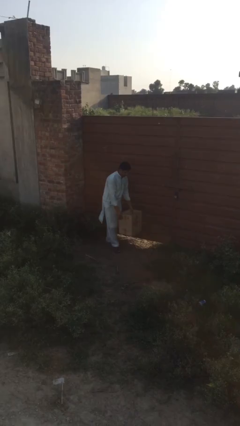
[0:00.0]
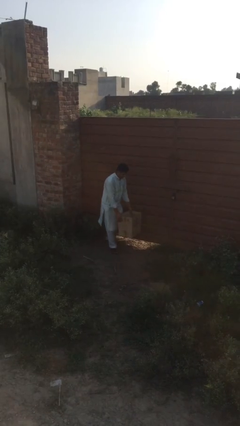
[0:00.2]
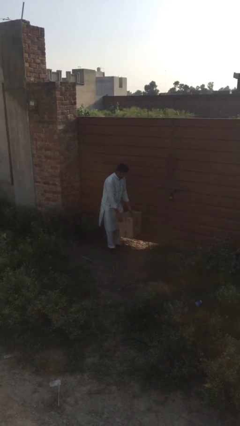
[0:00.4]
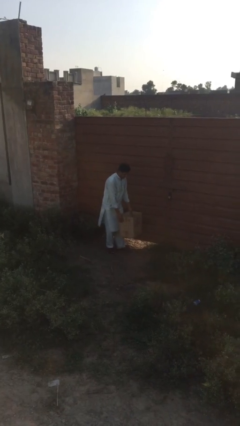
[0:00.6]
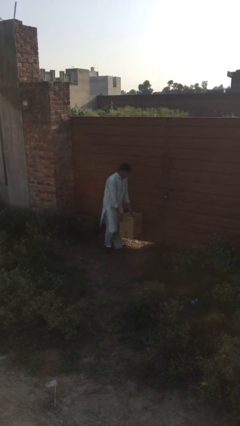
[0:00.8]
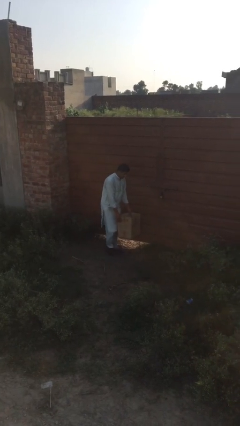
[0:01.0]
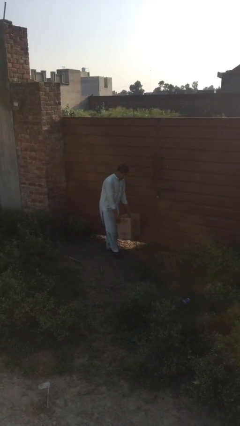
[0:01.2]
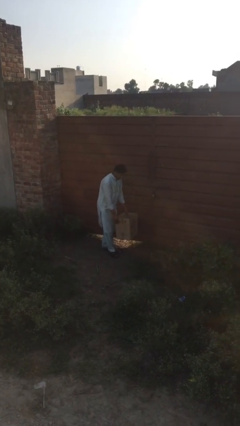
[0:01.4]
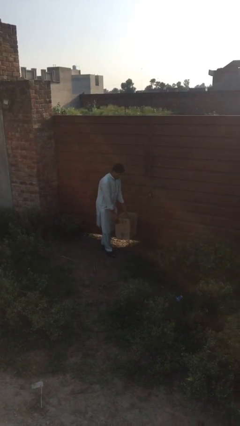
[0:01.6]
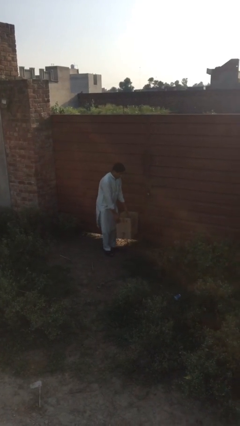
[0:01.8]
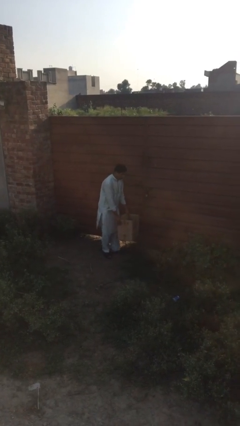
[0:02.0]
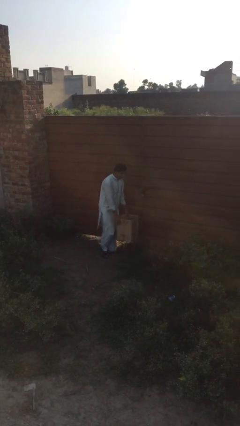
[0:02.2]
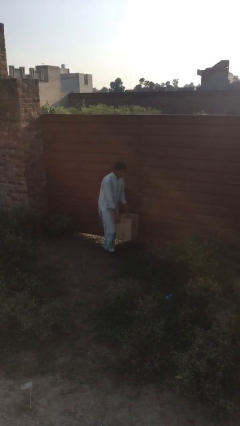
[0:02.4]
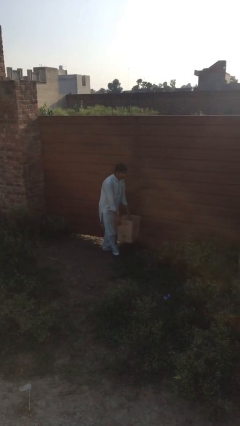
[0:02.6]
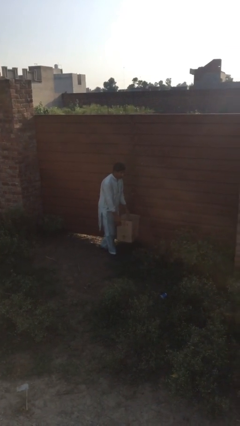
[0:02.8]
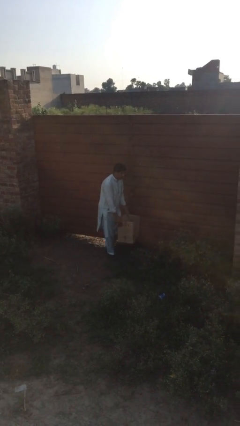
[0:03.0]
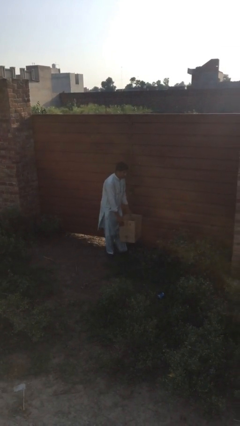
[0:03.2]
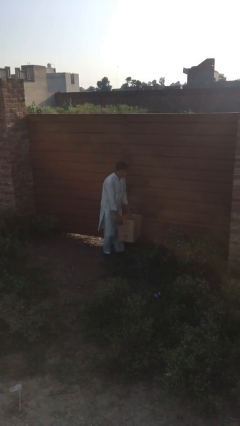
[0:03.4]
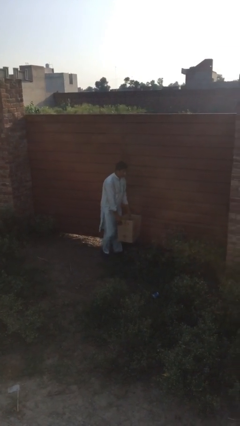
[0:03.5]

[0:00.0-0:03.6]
person carries heavy object

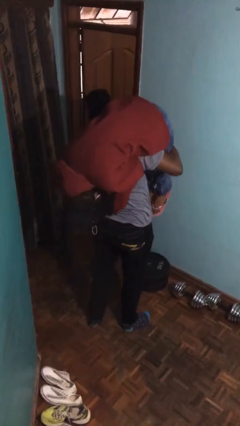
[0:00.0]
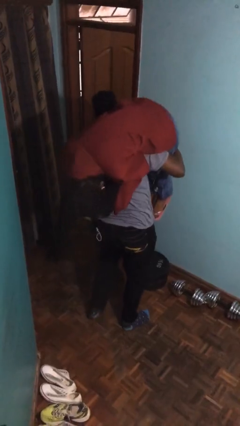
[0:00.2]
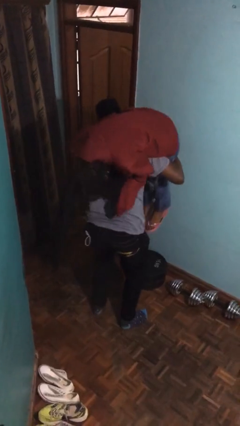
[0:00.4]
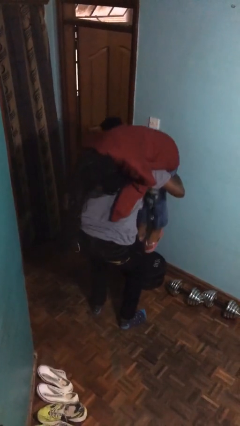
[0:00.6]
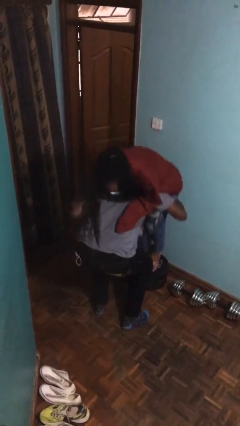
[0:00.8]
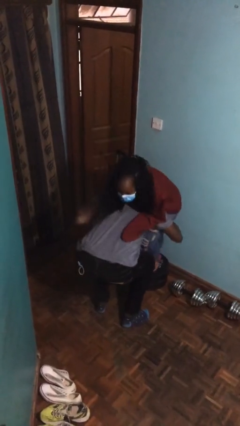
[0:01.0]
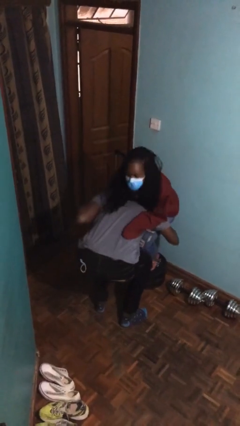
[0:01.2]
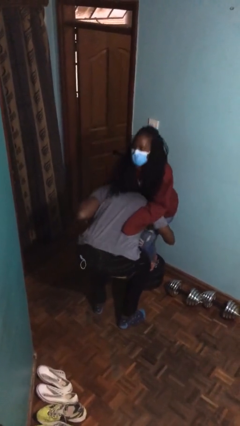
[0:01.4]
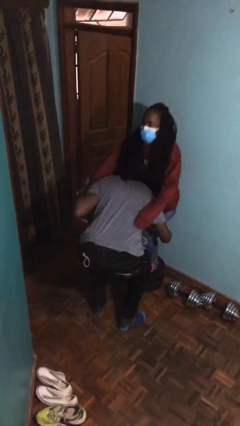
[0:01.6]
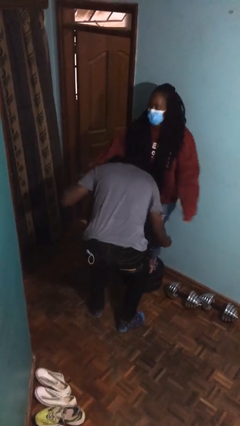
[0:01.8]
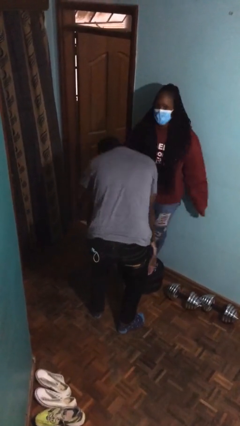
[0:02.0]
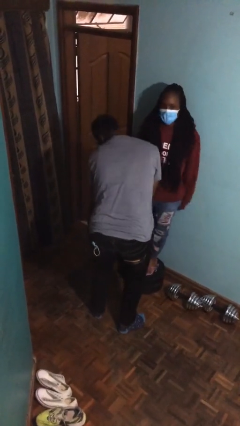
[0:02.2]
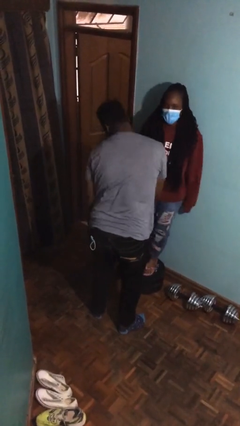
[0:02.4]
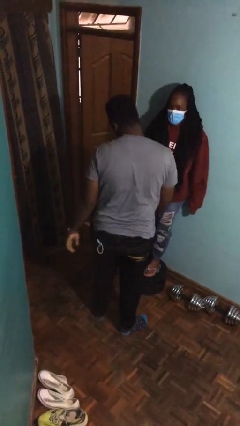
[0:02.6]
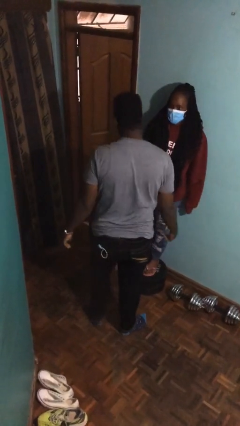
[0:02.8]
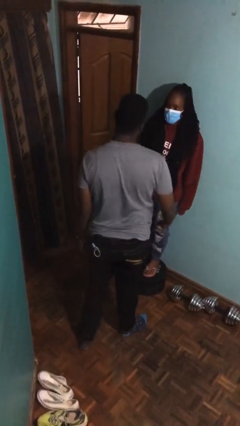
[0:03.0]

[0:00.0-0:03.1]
person puts down person

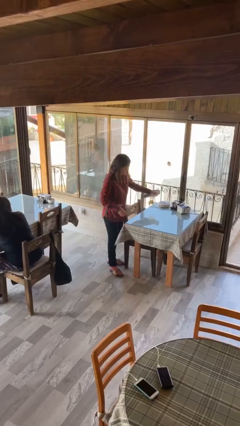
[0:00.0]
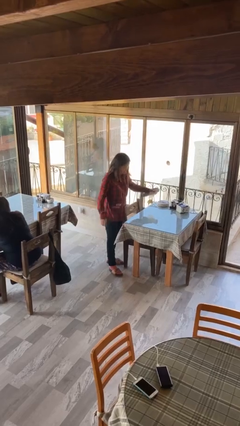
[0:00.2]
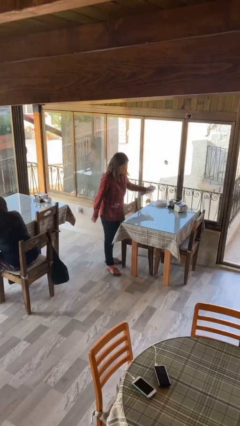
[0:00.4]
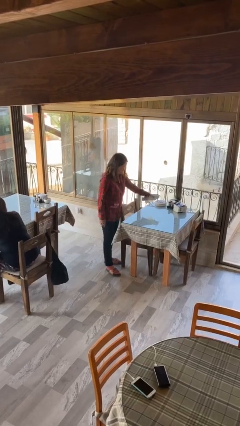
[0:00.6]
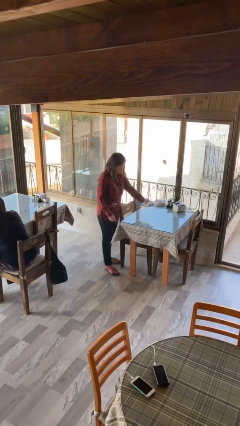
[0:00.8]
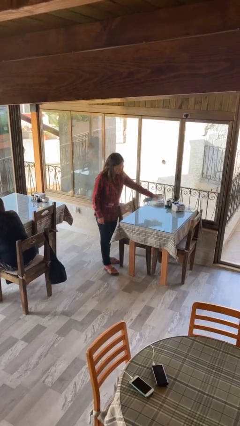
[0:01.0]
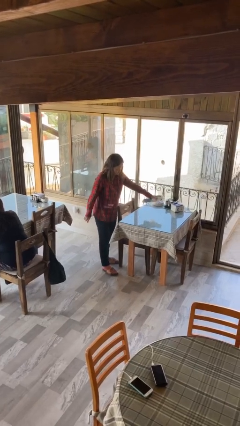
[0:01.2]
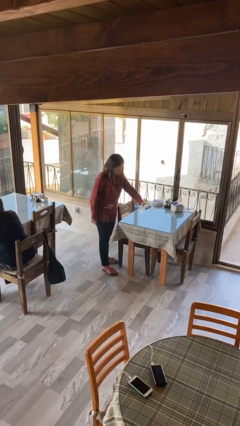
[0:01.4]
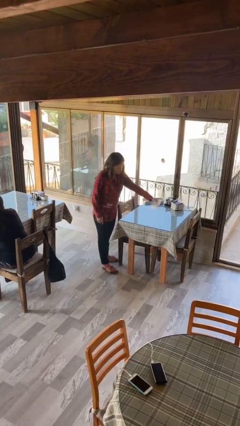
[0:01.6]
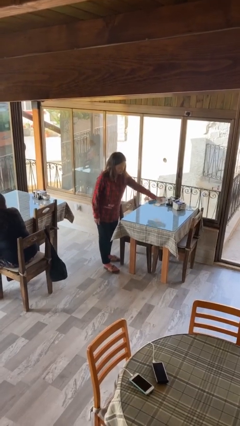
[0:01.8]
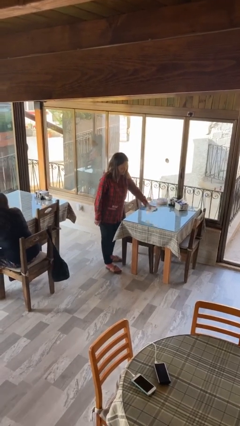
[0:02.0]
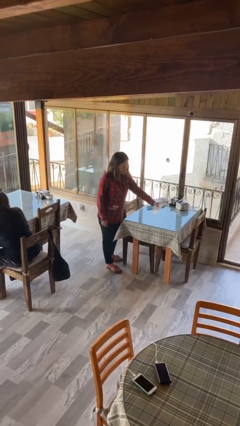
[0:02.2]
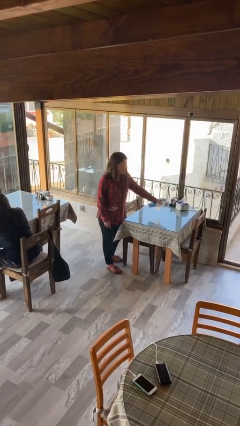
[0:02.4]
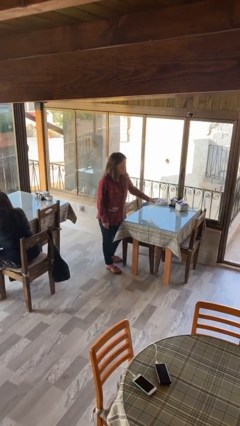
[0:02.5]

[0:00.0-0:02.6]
person sprays from bottle

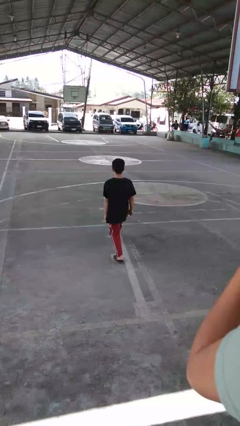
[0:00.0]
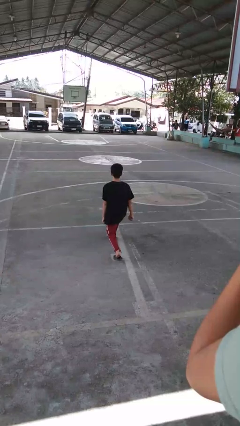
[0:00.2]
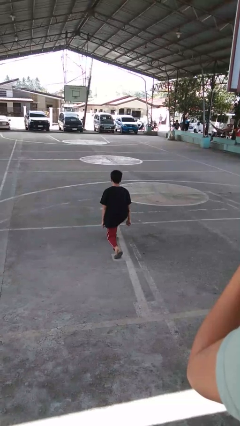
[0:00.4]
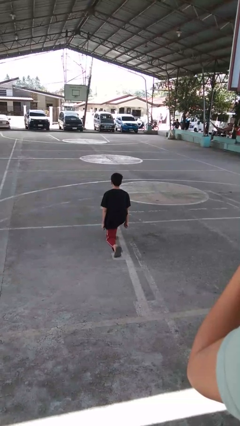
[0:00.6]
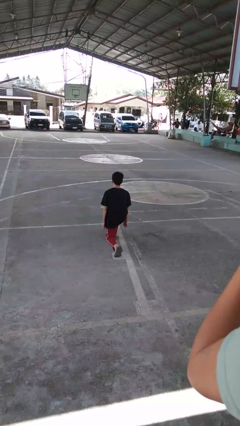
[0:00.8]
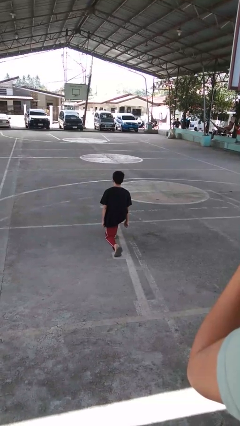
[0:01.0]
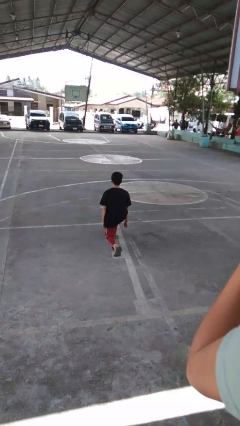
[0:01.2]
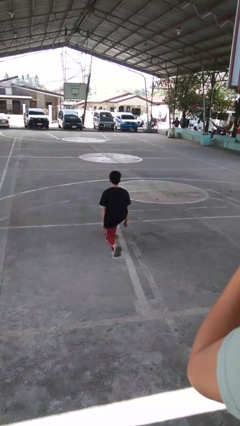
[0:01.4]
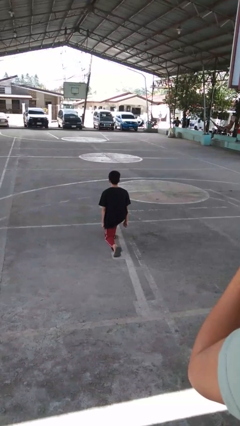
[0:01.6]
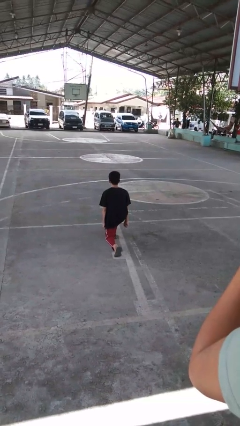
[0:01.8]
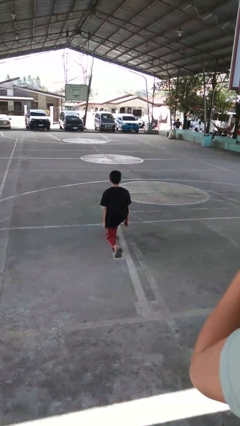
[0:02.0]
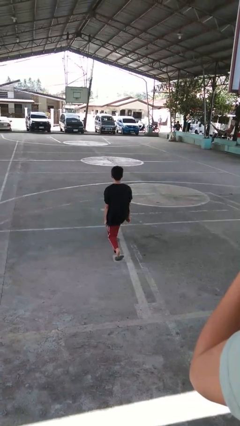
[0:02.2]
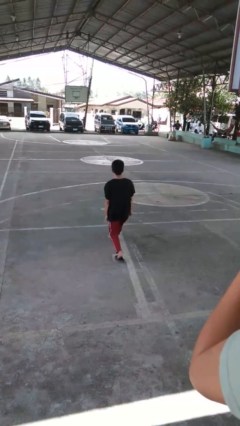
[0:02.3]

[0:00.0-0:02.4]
person exercises with lunges

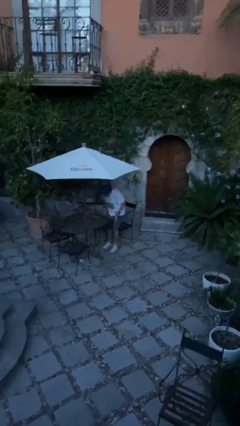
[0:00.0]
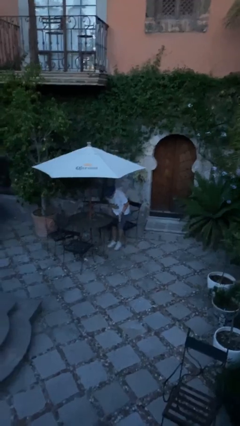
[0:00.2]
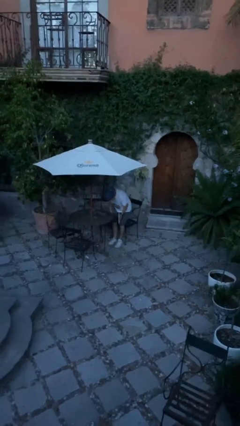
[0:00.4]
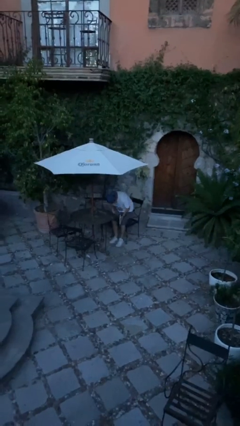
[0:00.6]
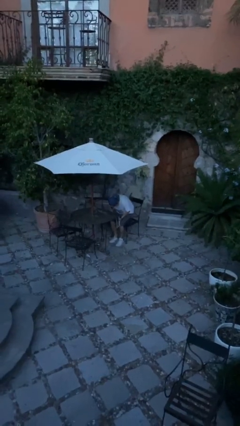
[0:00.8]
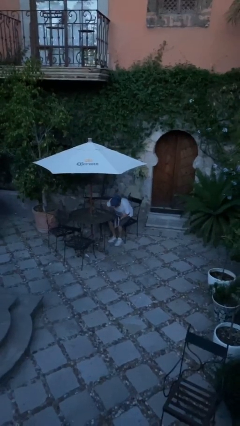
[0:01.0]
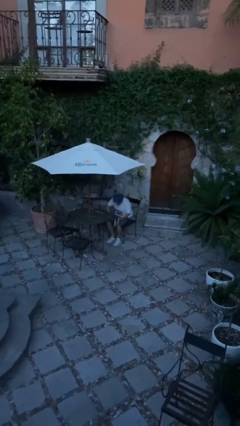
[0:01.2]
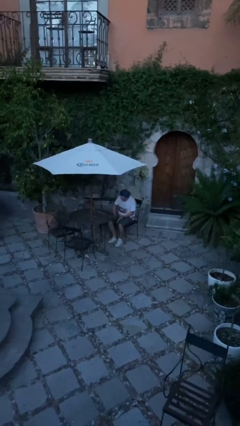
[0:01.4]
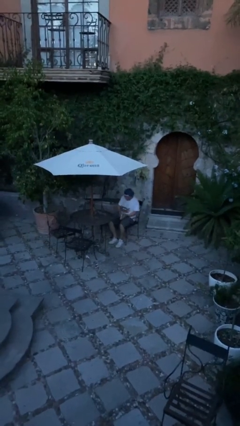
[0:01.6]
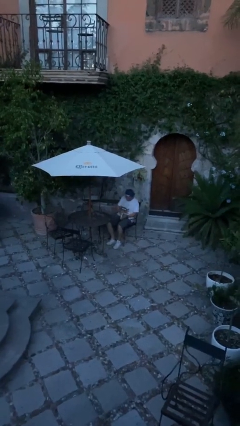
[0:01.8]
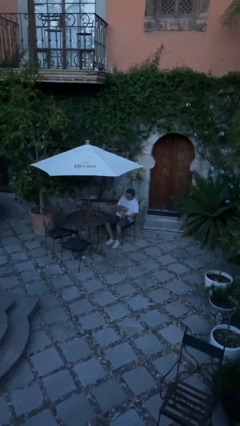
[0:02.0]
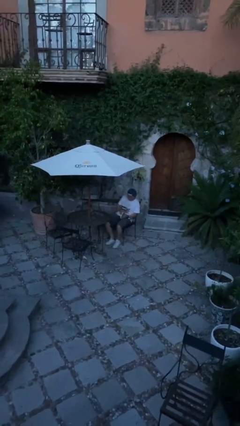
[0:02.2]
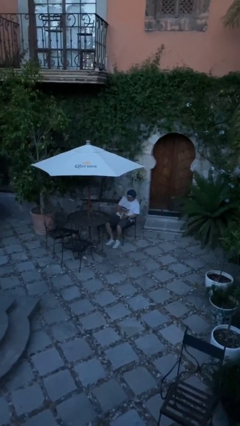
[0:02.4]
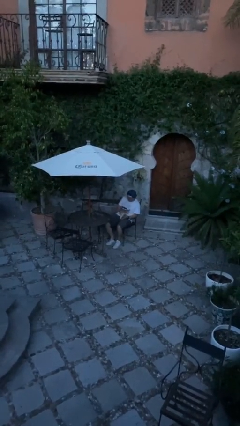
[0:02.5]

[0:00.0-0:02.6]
person sits down

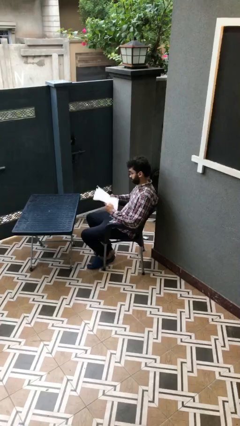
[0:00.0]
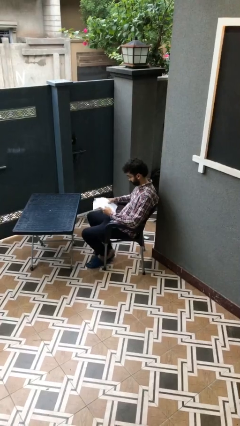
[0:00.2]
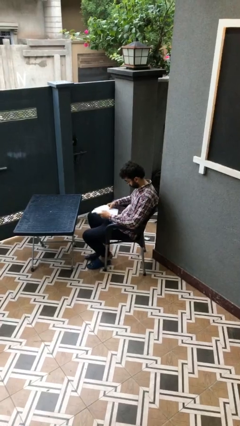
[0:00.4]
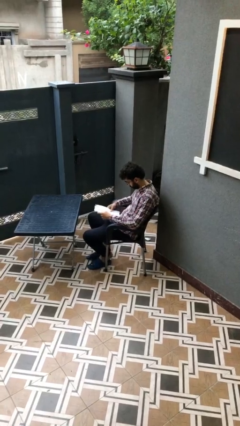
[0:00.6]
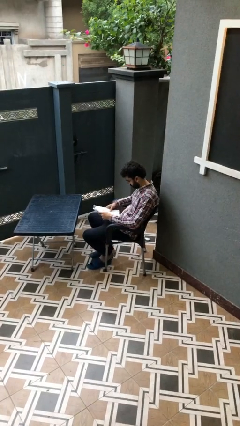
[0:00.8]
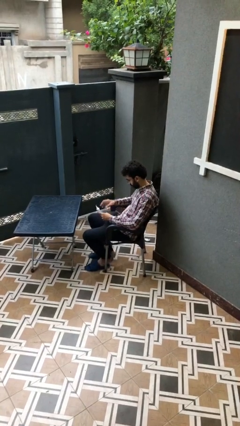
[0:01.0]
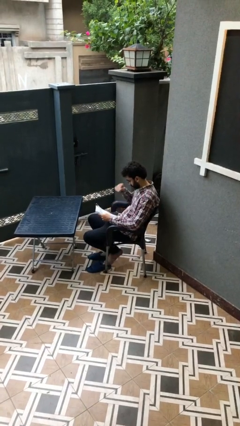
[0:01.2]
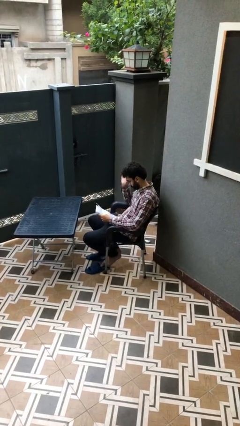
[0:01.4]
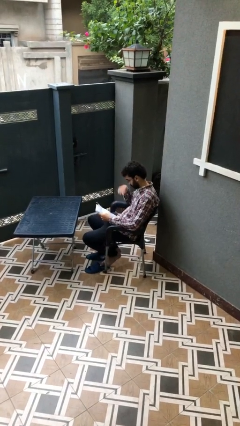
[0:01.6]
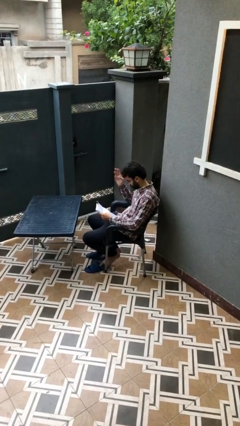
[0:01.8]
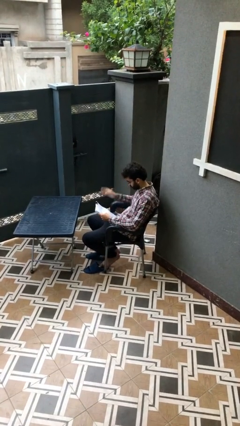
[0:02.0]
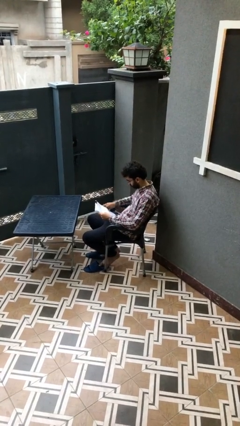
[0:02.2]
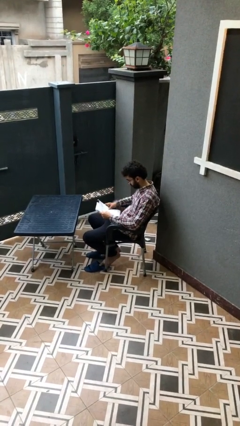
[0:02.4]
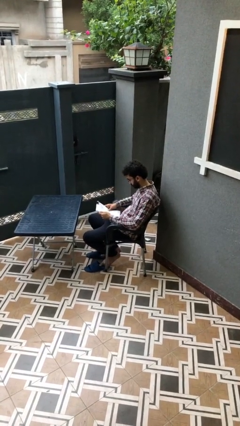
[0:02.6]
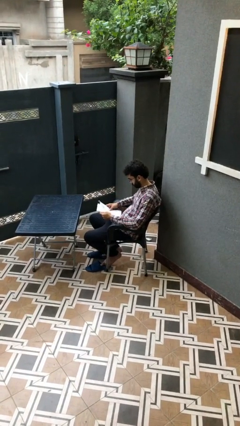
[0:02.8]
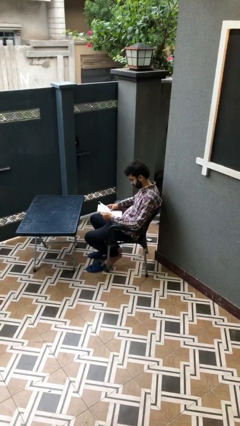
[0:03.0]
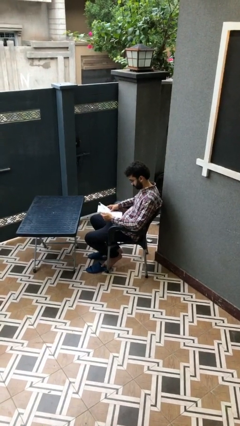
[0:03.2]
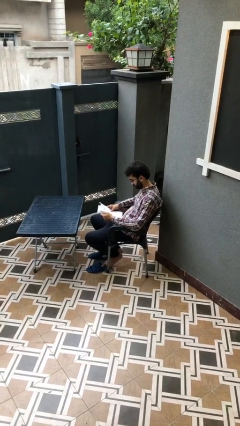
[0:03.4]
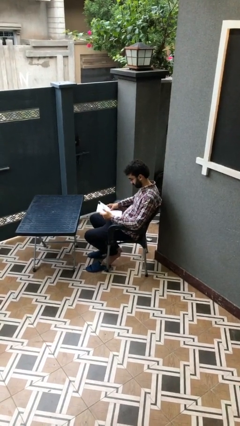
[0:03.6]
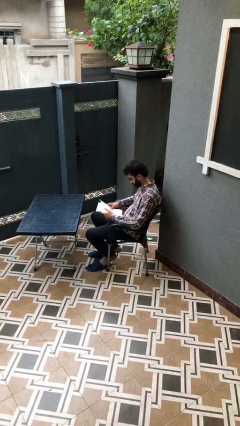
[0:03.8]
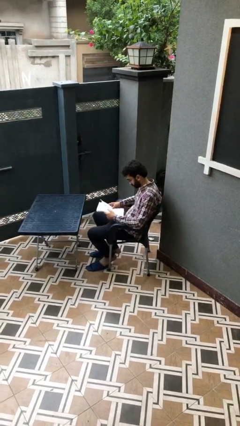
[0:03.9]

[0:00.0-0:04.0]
person reads document
